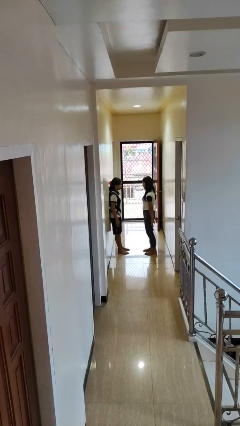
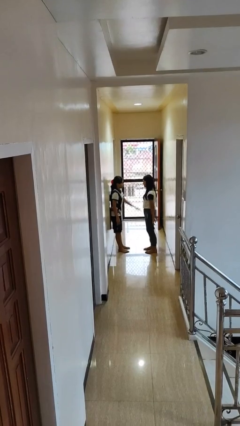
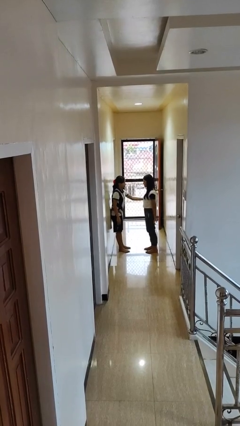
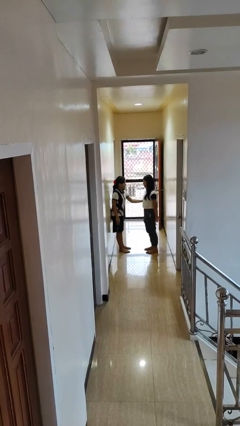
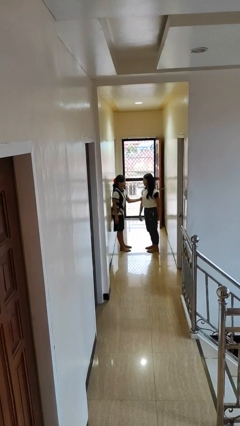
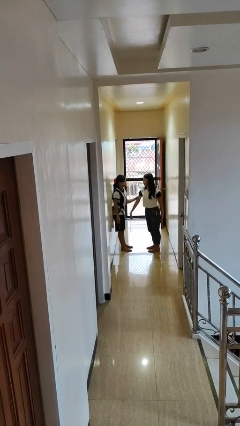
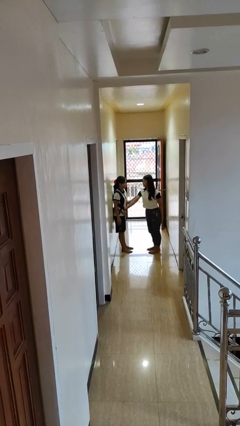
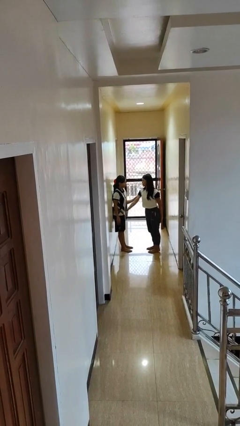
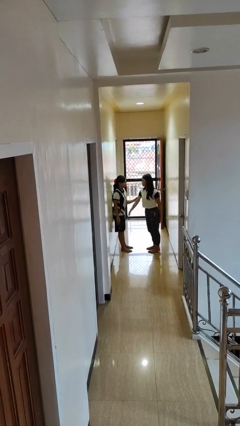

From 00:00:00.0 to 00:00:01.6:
person grabs person by bicep

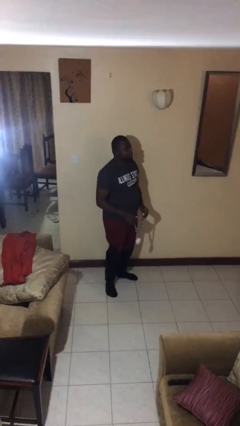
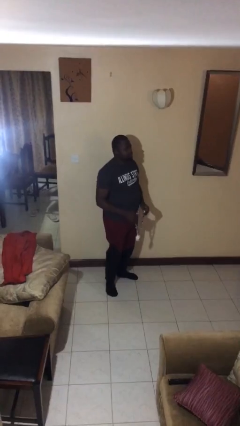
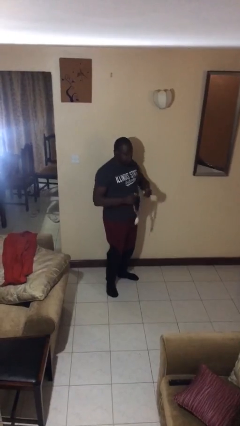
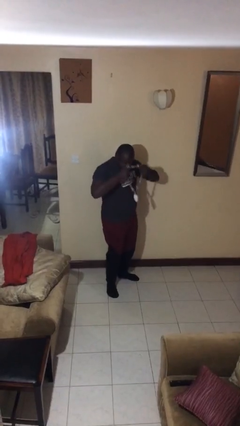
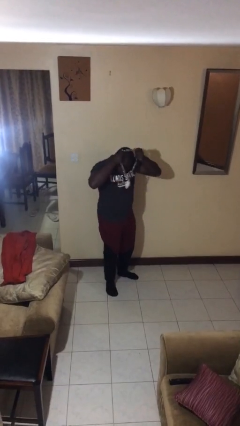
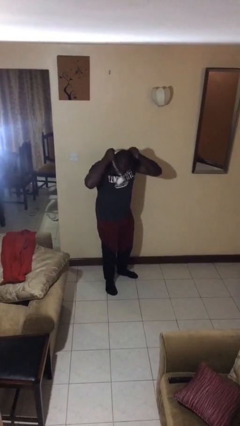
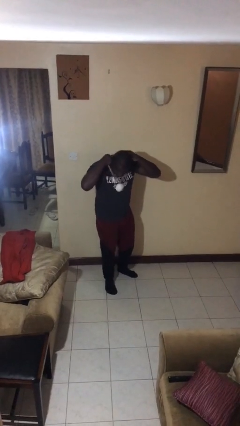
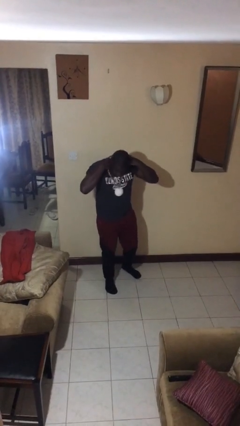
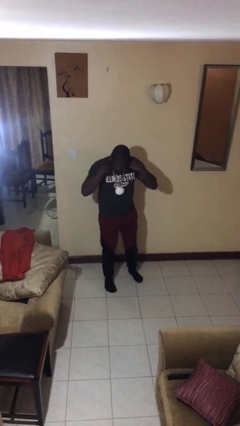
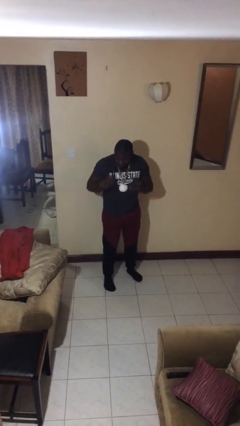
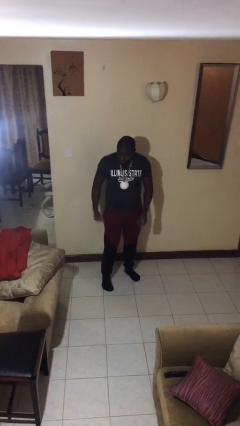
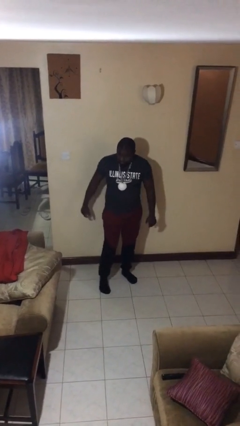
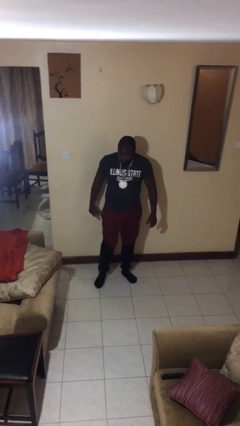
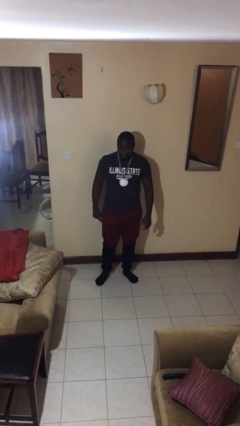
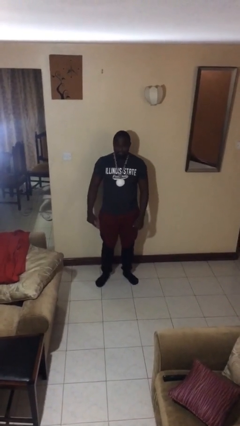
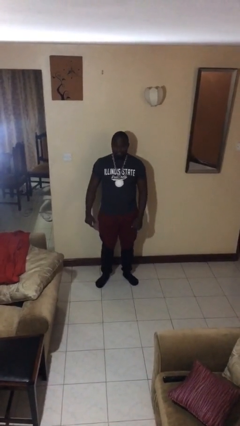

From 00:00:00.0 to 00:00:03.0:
person puts on necklace

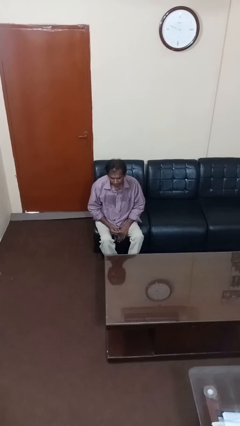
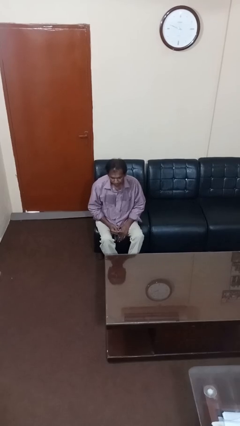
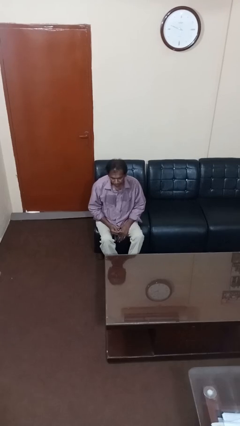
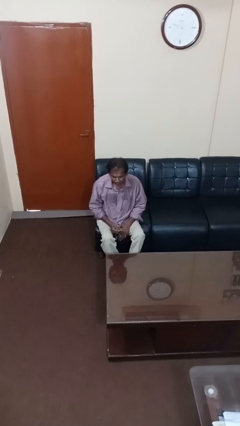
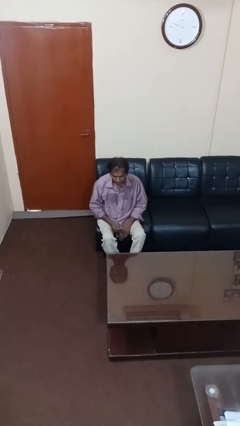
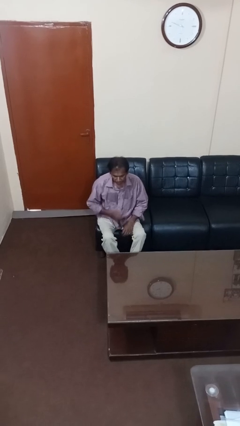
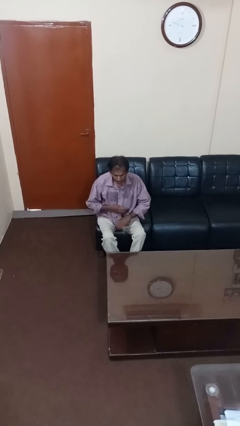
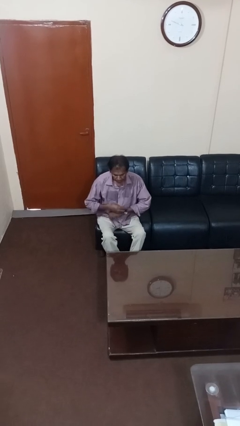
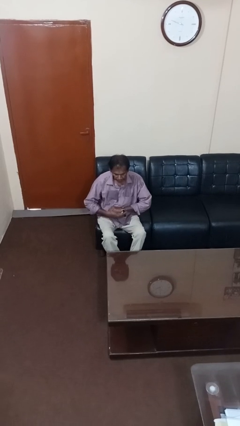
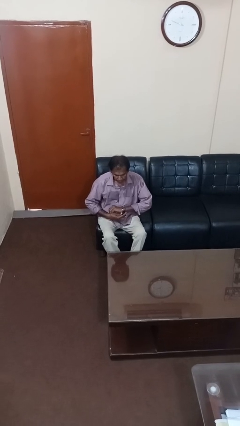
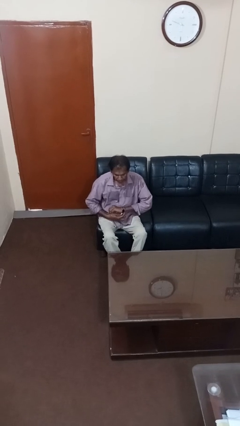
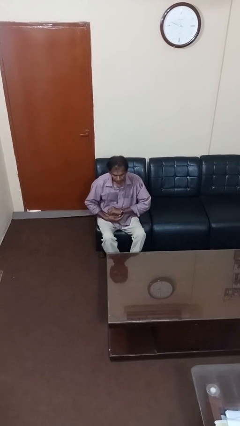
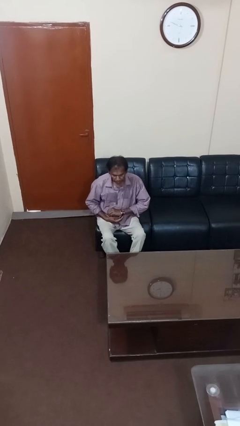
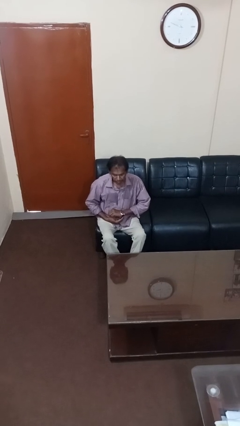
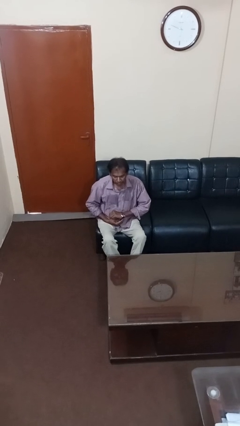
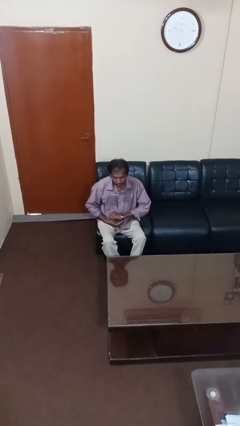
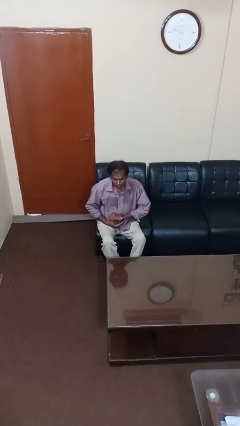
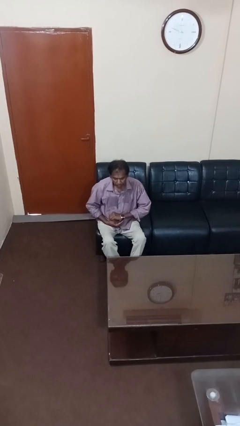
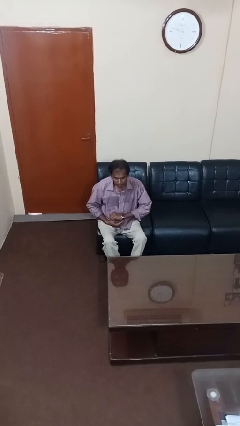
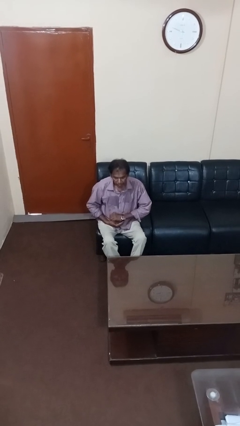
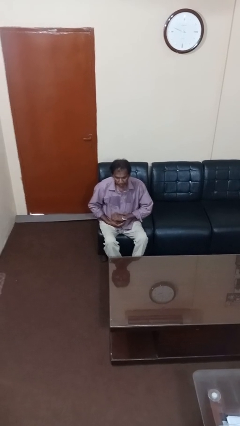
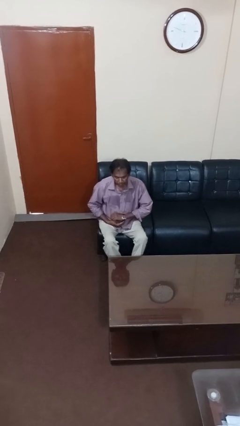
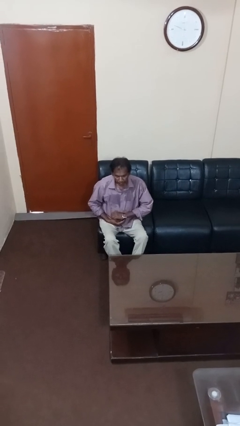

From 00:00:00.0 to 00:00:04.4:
person puts on wristwatch

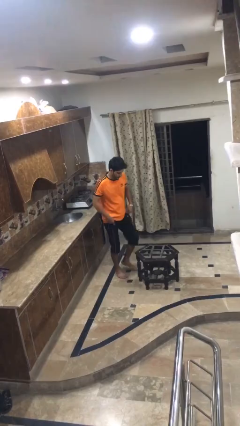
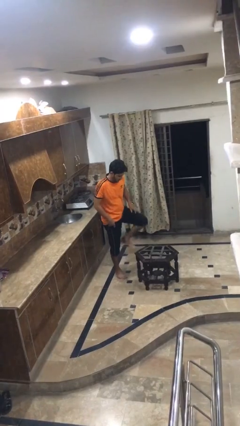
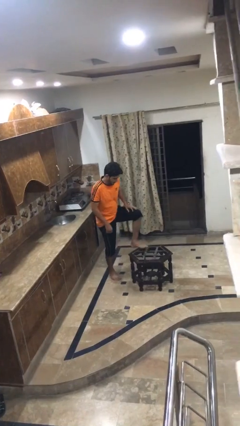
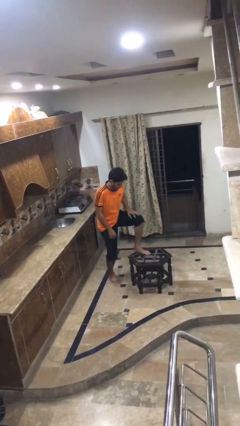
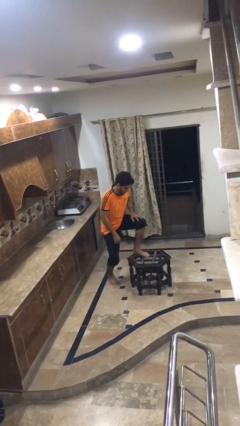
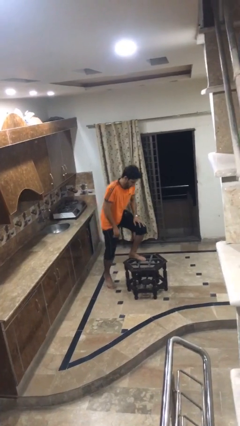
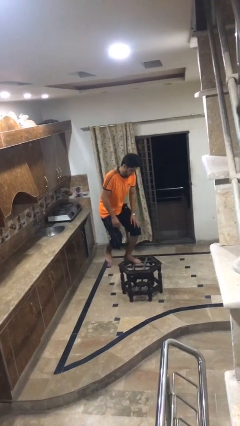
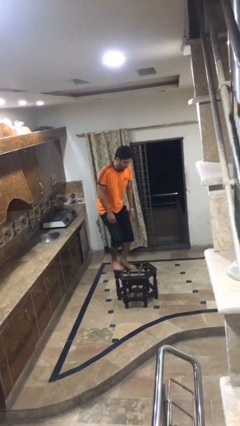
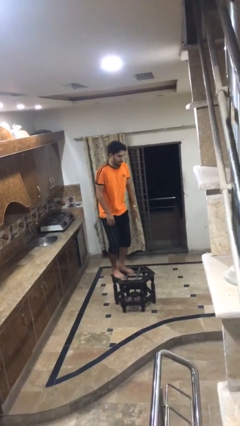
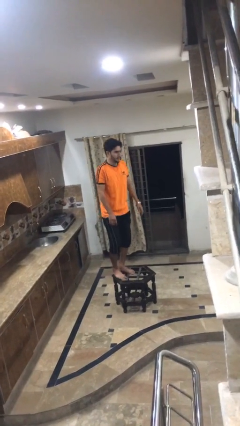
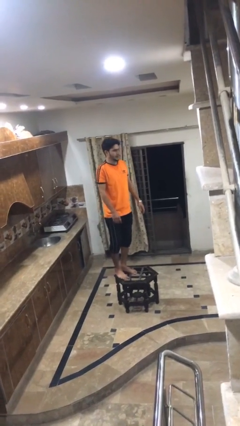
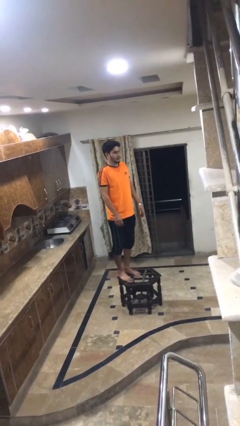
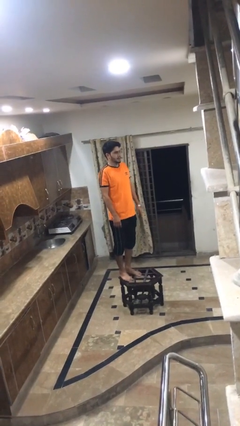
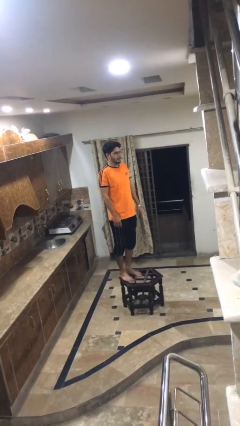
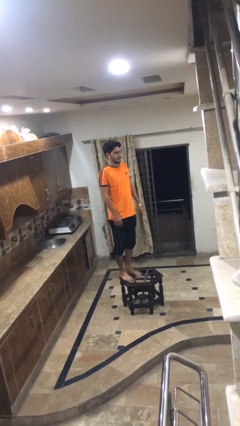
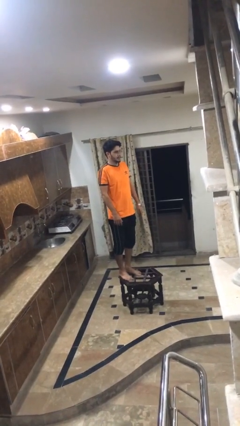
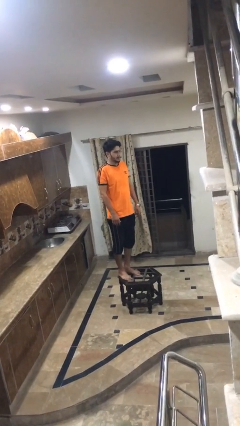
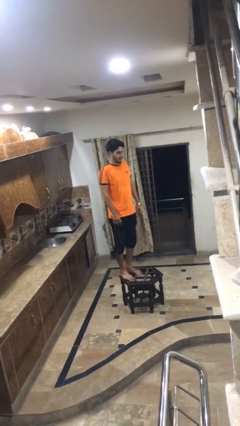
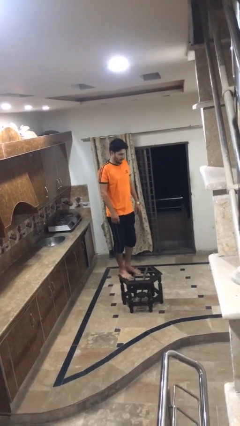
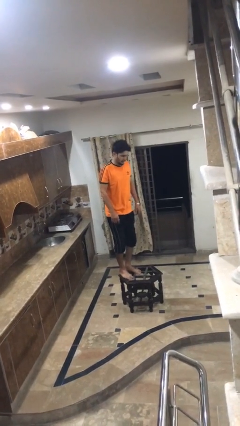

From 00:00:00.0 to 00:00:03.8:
person climbs on table

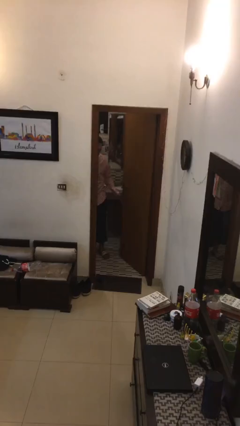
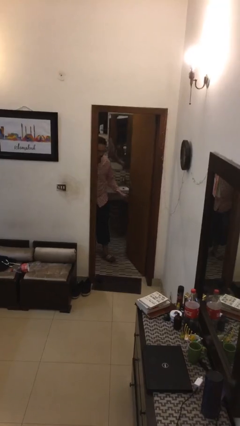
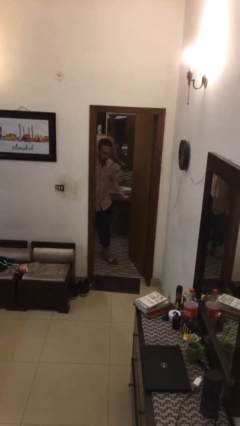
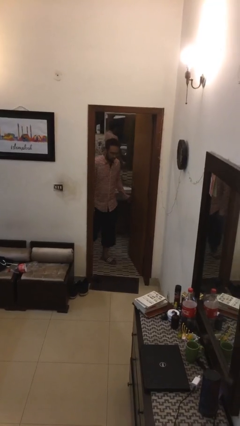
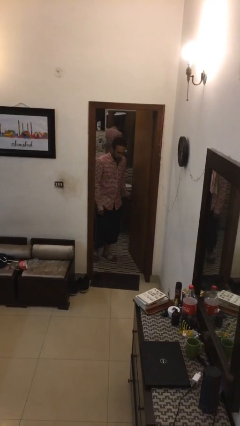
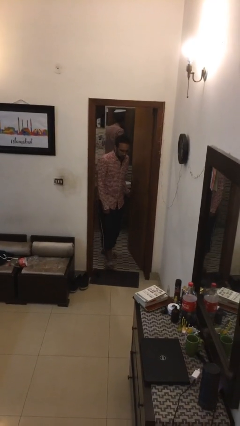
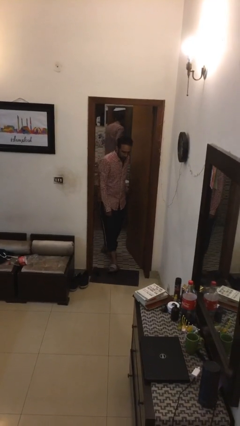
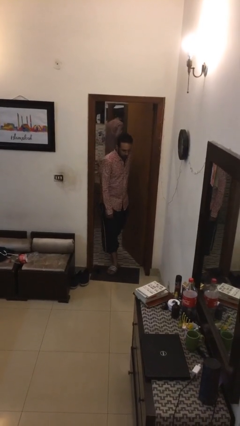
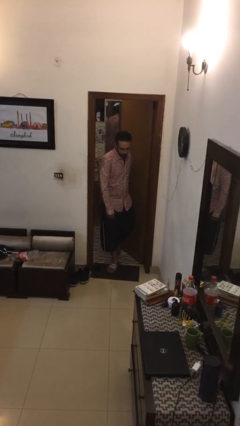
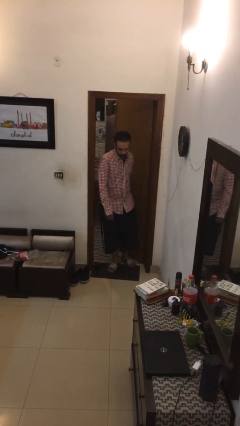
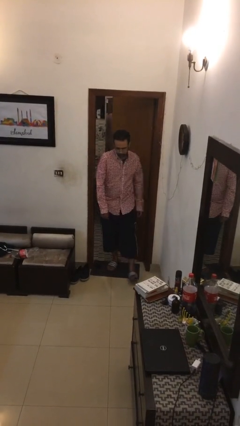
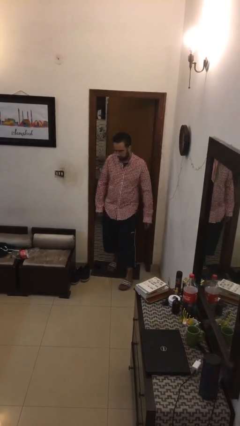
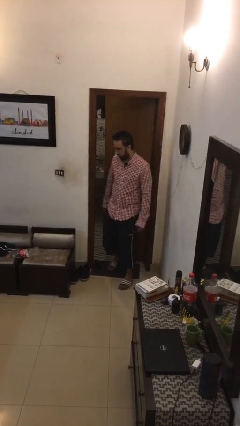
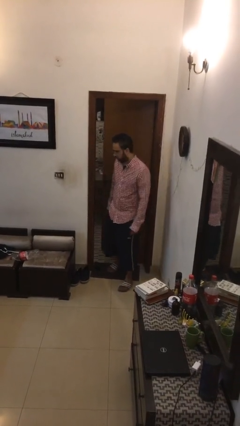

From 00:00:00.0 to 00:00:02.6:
person enters scene through structure

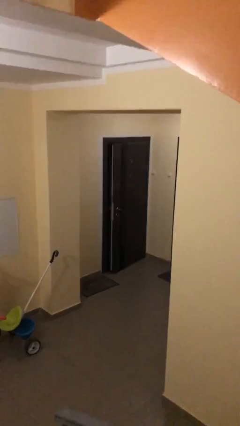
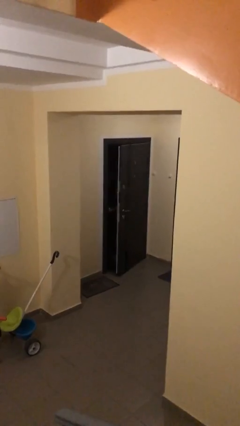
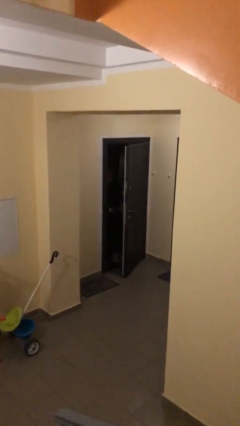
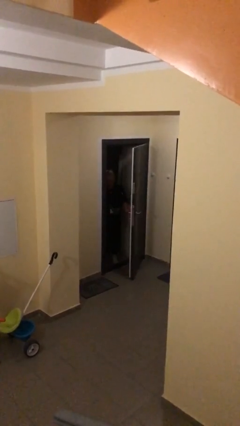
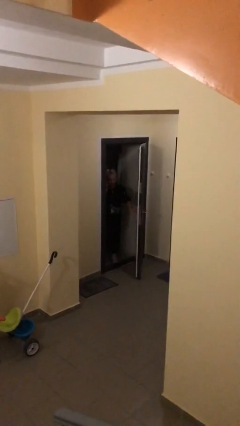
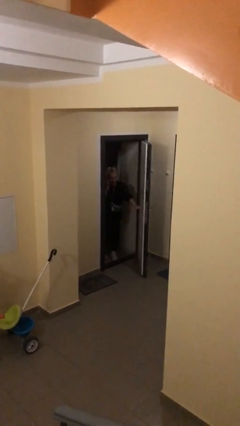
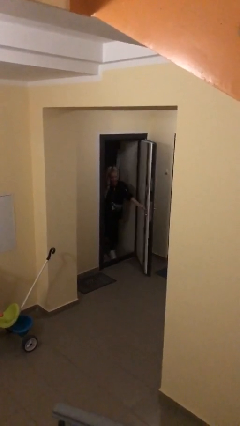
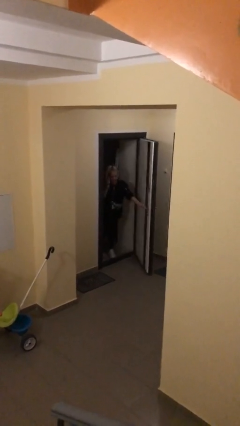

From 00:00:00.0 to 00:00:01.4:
person opens facility door

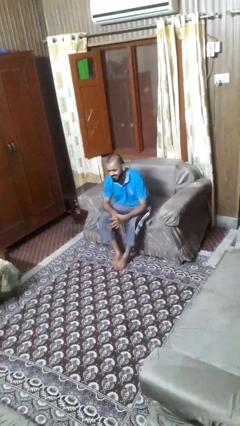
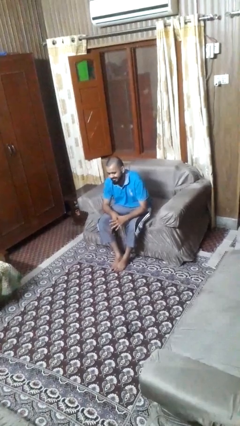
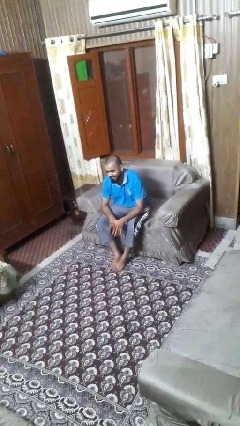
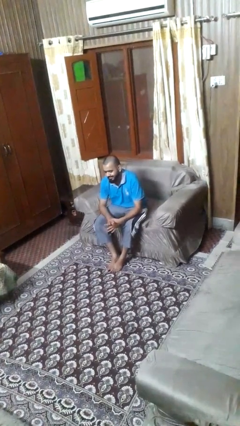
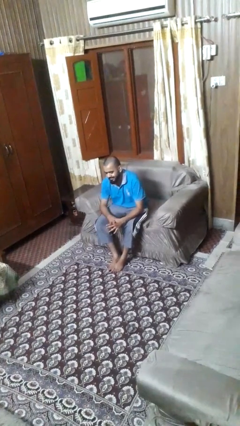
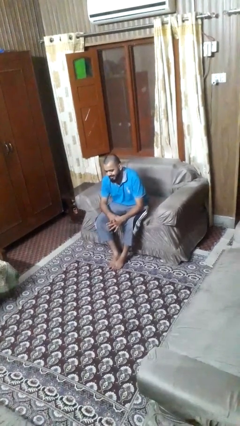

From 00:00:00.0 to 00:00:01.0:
person cracks knuckles
